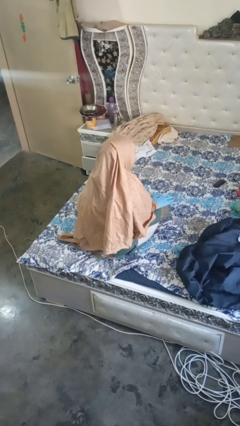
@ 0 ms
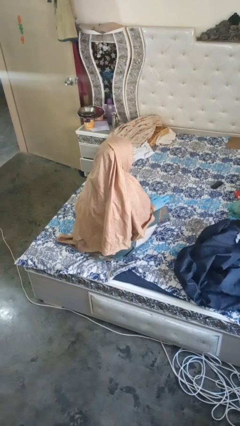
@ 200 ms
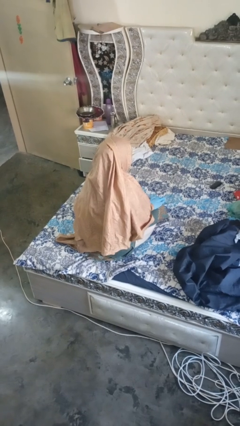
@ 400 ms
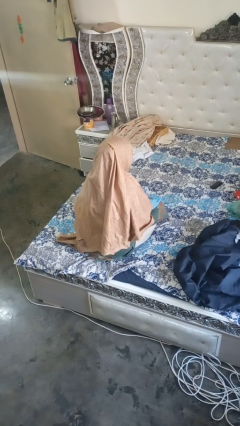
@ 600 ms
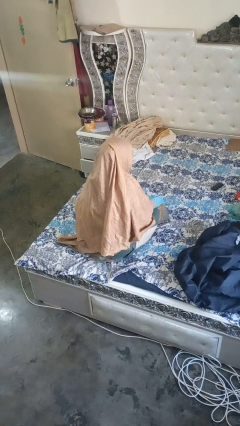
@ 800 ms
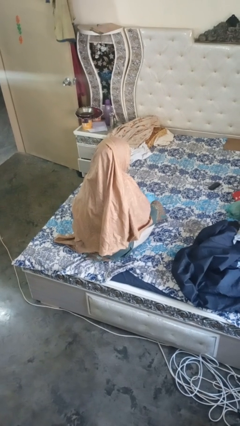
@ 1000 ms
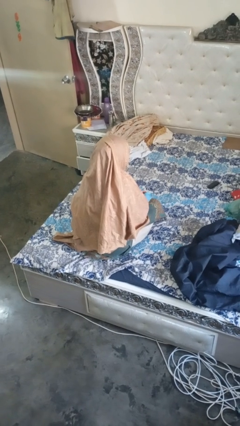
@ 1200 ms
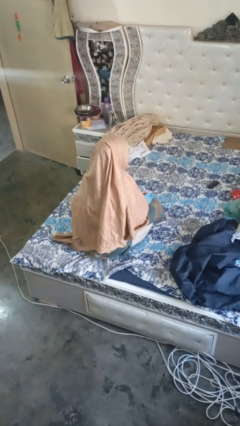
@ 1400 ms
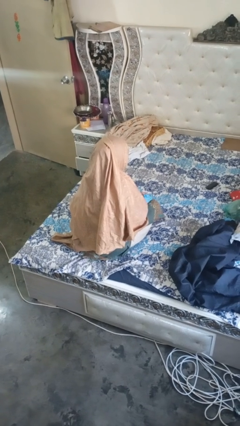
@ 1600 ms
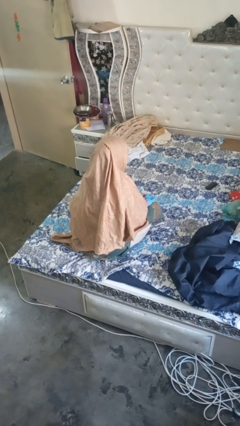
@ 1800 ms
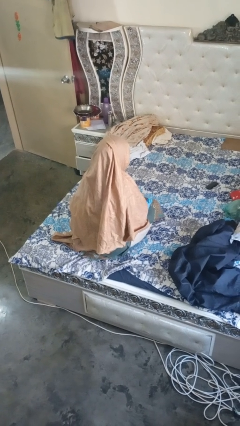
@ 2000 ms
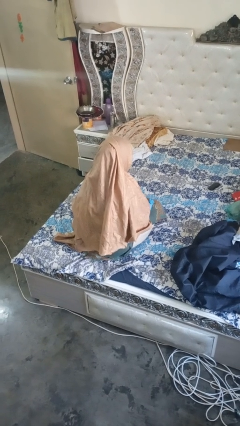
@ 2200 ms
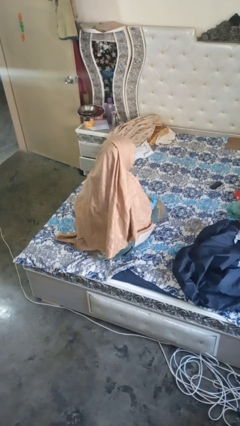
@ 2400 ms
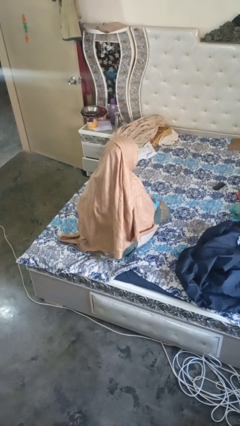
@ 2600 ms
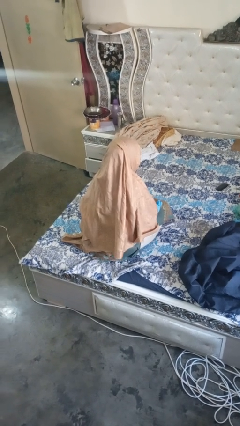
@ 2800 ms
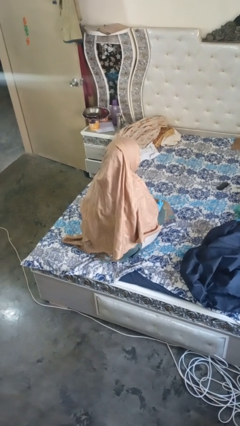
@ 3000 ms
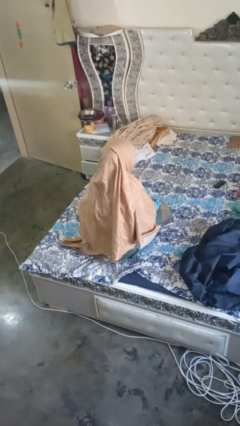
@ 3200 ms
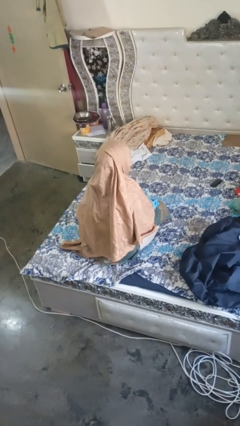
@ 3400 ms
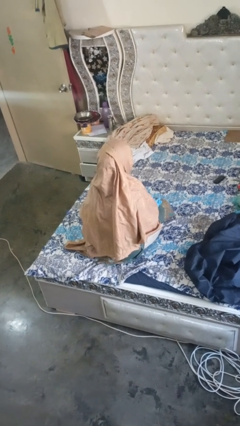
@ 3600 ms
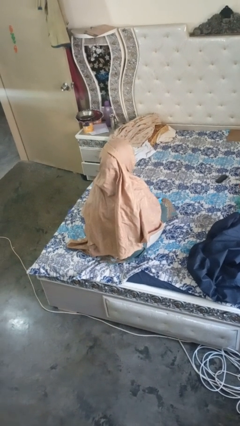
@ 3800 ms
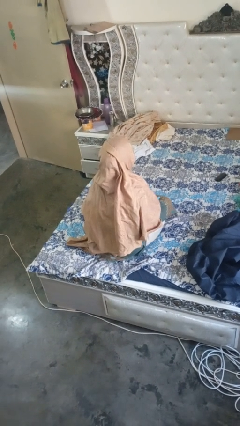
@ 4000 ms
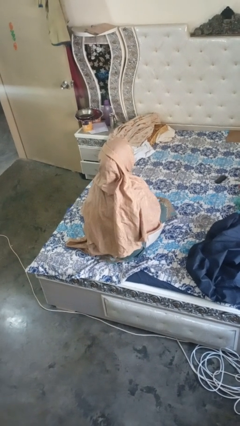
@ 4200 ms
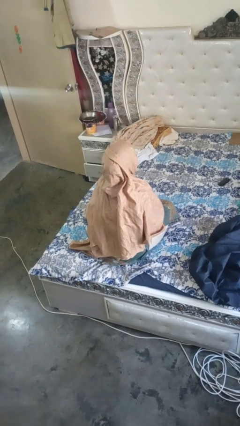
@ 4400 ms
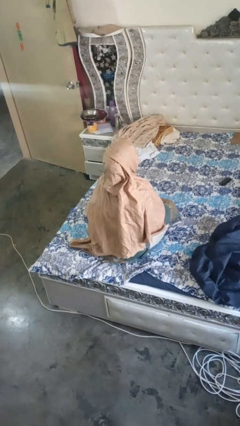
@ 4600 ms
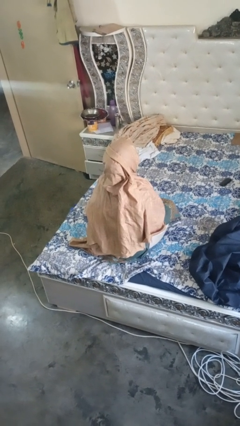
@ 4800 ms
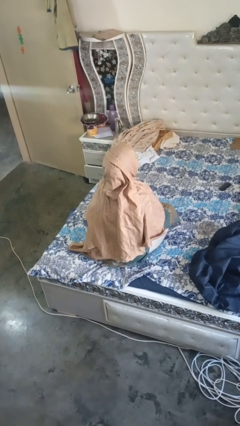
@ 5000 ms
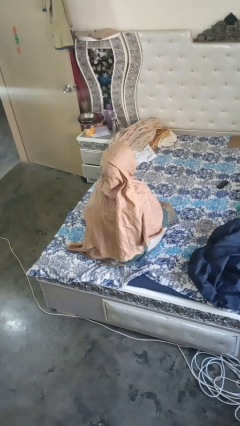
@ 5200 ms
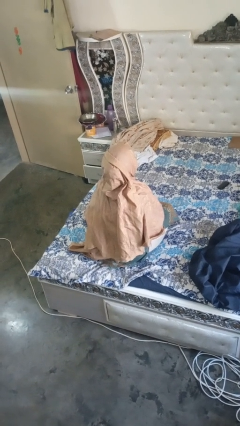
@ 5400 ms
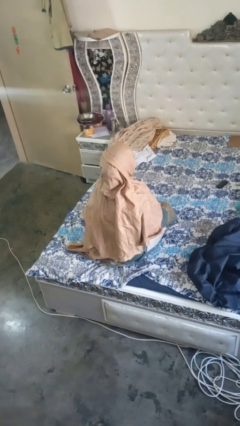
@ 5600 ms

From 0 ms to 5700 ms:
person takes off gloves

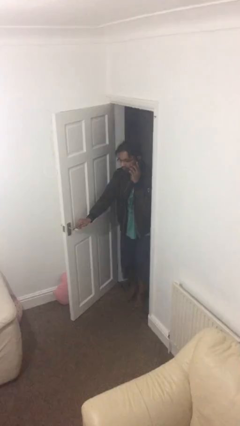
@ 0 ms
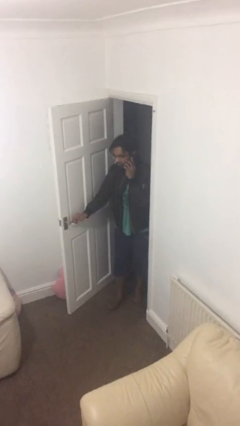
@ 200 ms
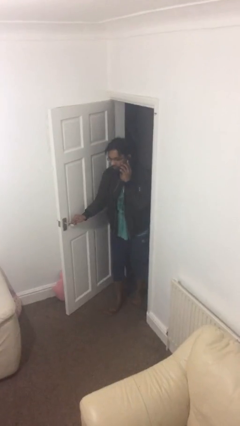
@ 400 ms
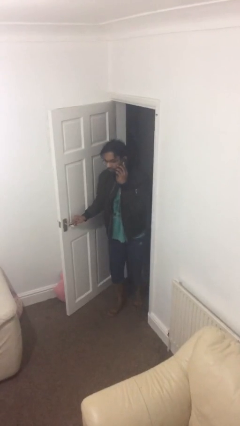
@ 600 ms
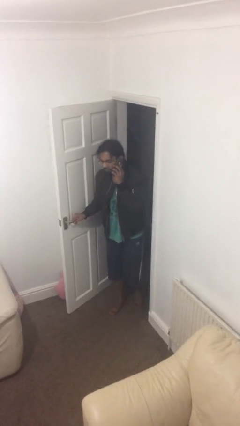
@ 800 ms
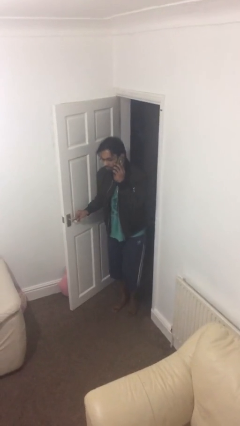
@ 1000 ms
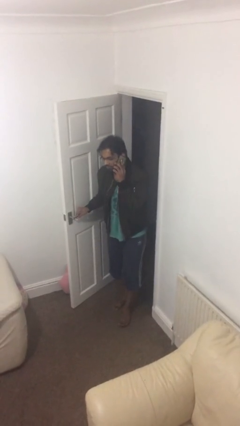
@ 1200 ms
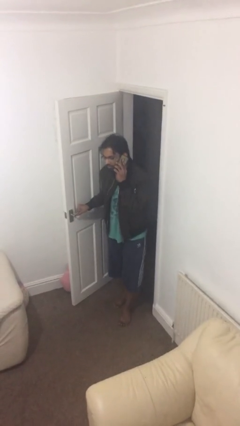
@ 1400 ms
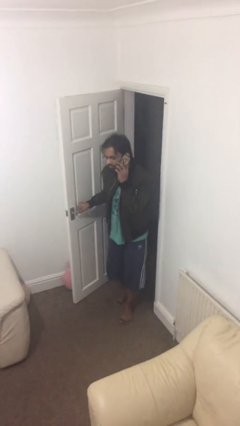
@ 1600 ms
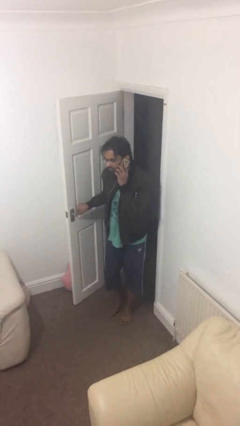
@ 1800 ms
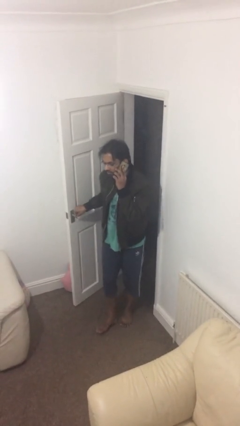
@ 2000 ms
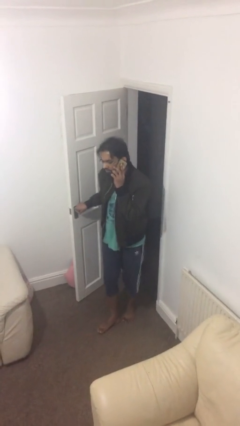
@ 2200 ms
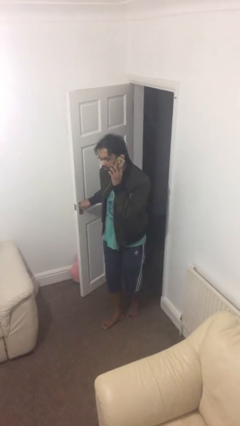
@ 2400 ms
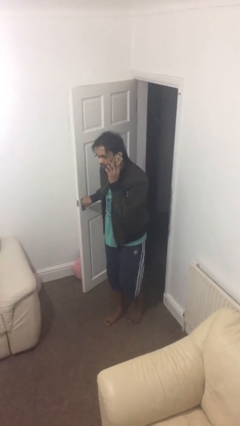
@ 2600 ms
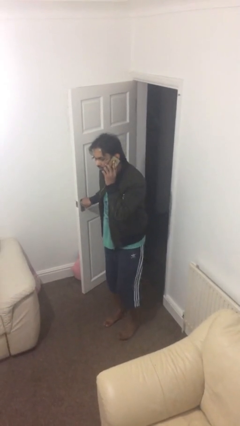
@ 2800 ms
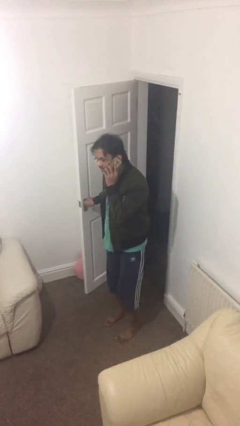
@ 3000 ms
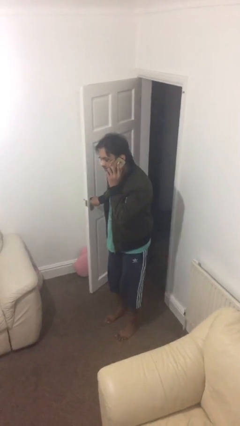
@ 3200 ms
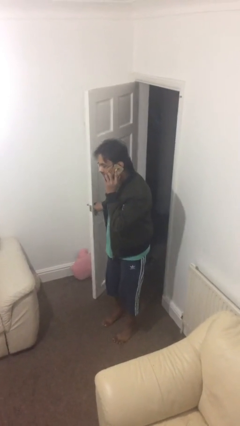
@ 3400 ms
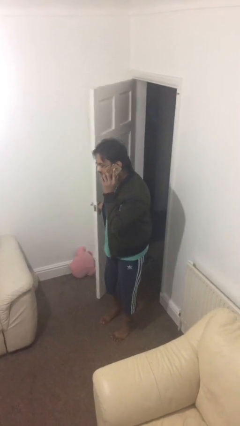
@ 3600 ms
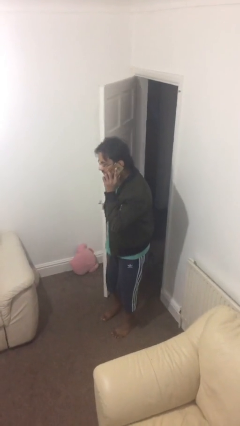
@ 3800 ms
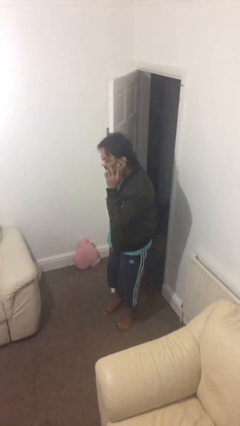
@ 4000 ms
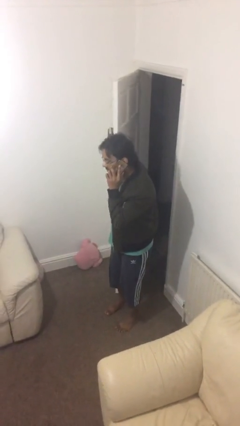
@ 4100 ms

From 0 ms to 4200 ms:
person enters scene through structure

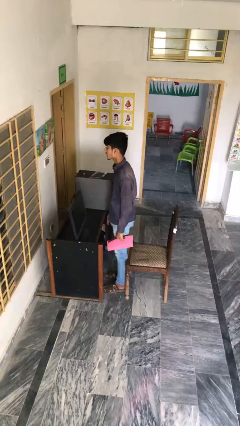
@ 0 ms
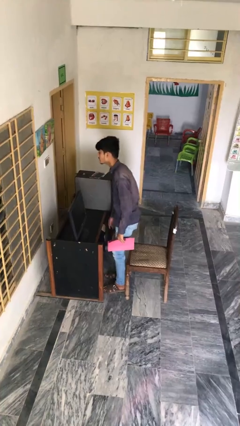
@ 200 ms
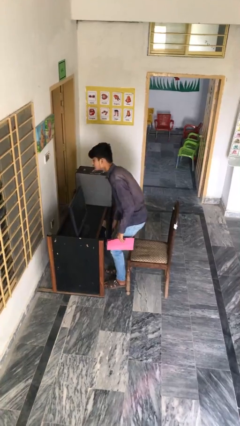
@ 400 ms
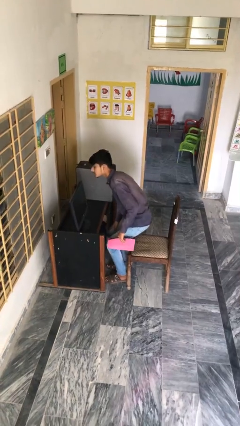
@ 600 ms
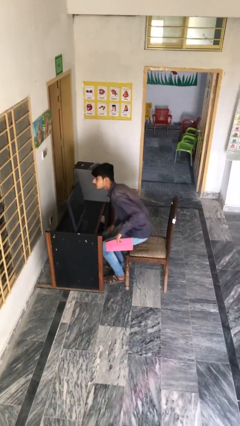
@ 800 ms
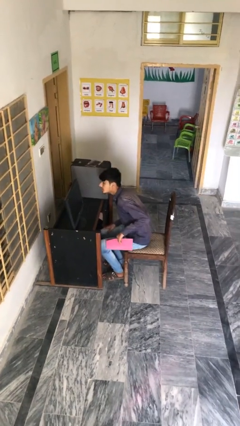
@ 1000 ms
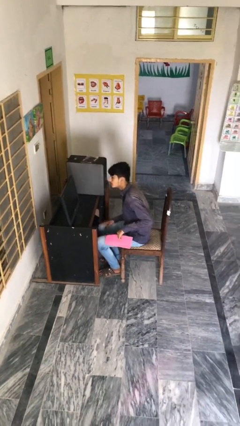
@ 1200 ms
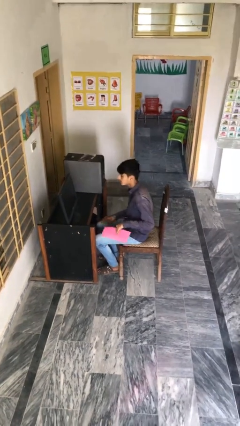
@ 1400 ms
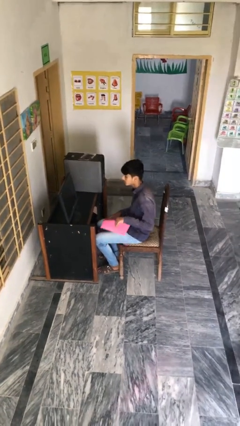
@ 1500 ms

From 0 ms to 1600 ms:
person sits down

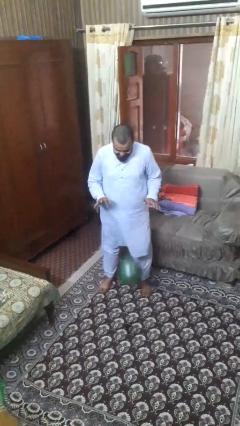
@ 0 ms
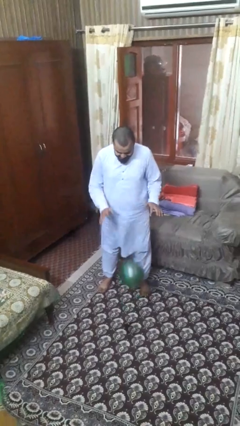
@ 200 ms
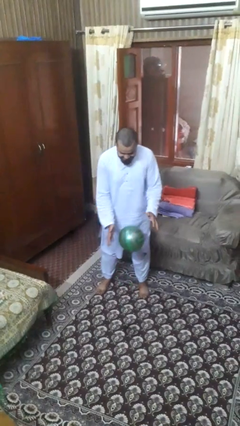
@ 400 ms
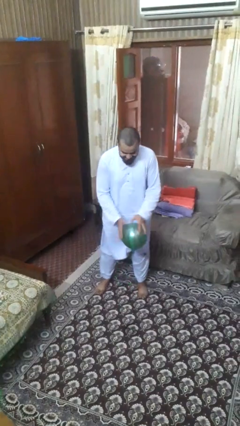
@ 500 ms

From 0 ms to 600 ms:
person bounces ball on floor

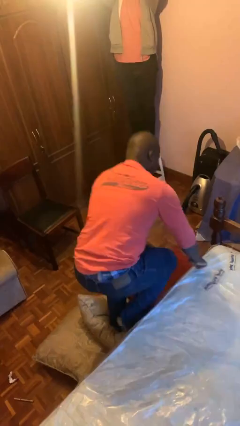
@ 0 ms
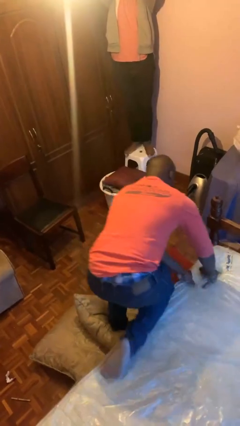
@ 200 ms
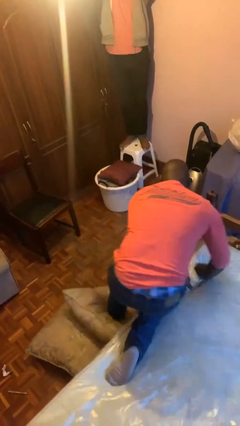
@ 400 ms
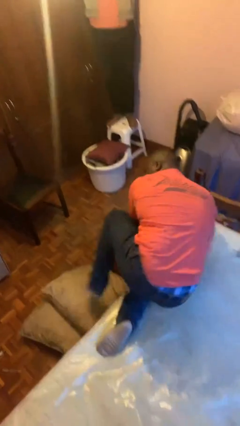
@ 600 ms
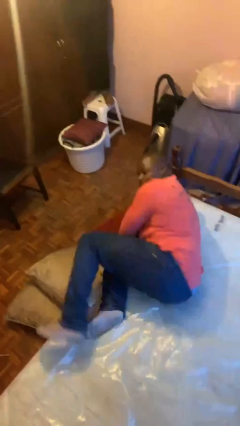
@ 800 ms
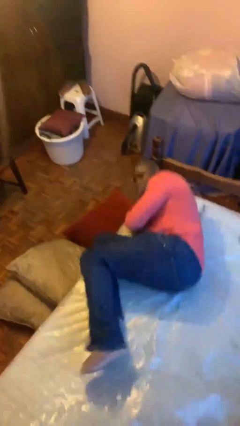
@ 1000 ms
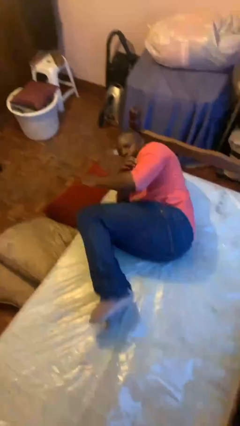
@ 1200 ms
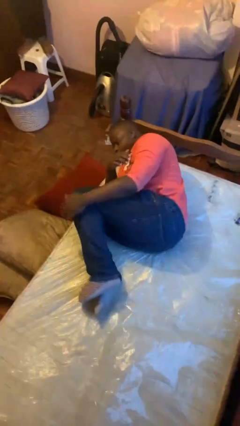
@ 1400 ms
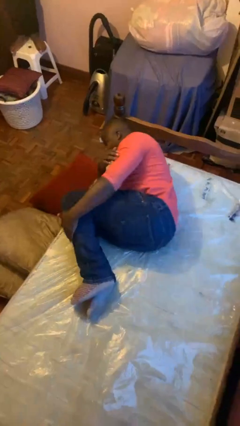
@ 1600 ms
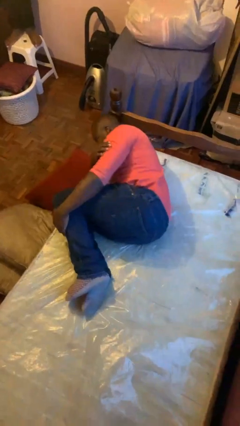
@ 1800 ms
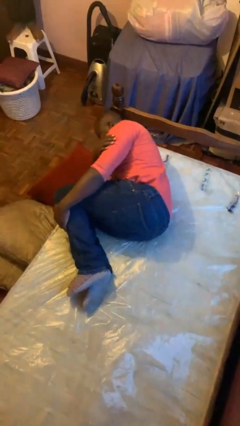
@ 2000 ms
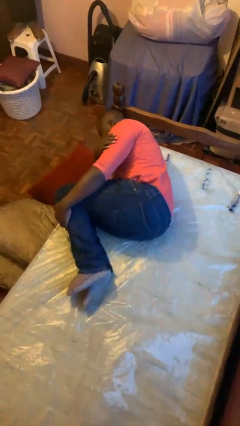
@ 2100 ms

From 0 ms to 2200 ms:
person lies down on bed

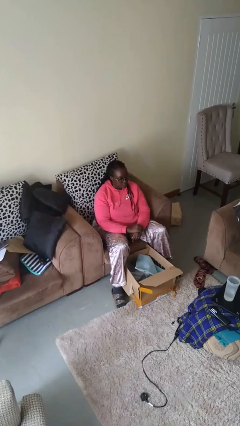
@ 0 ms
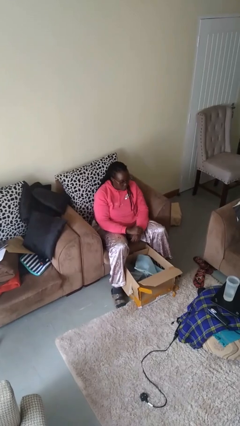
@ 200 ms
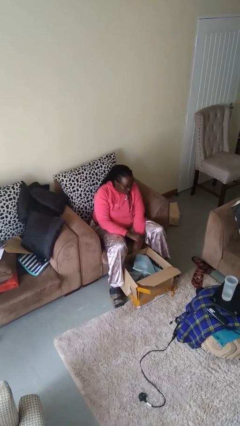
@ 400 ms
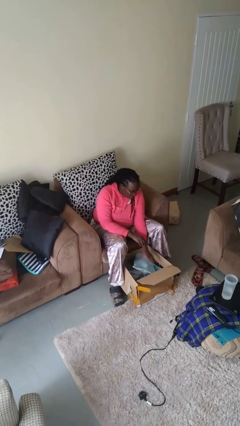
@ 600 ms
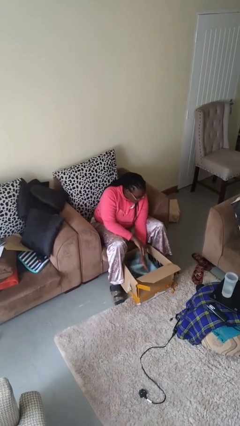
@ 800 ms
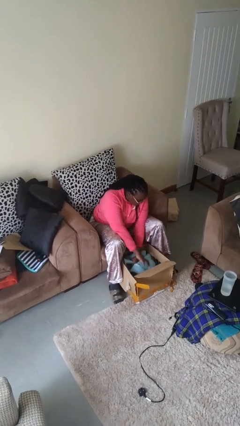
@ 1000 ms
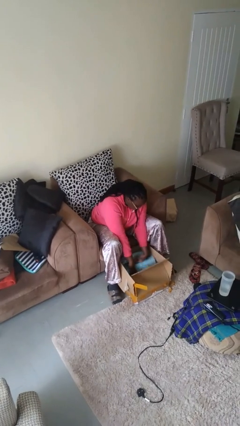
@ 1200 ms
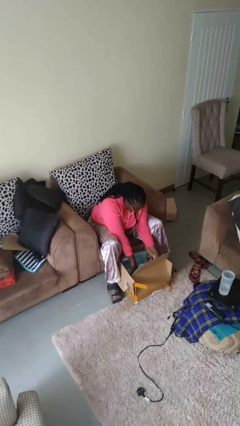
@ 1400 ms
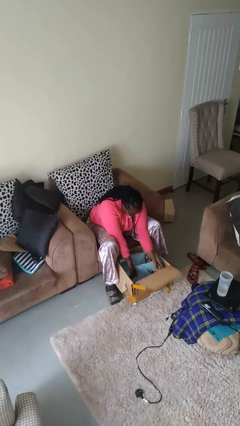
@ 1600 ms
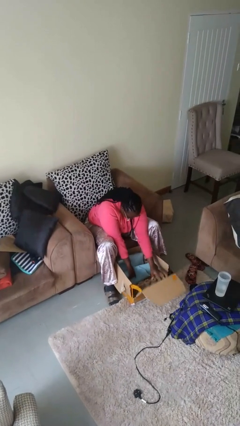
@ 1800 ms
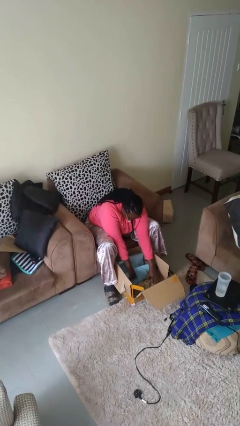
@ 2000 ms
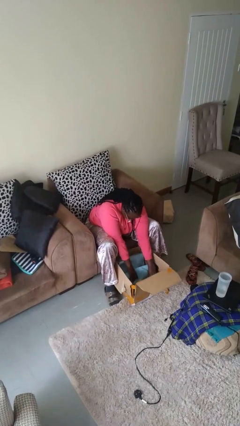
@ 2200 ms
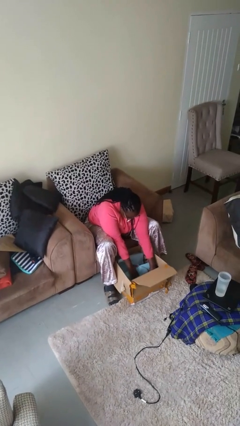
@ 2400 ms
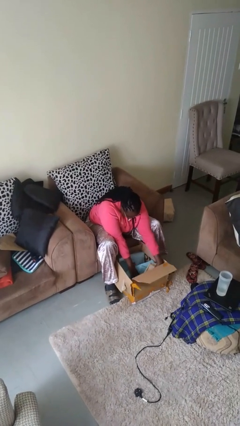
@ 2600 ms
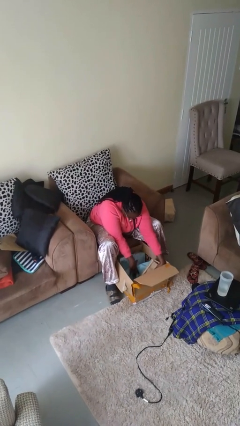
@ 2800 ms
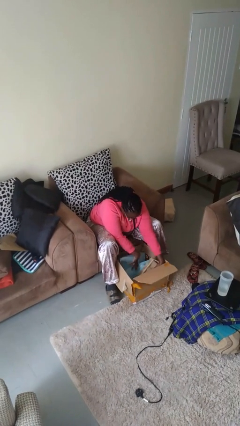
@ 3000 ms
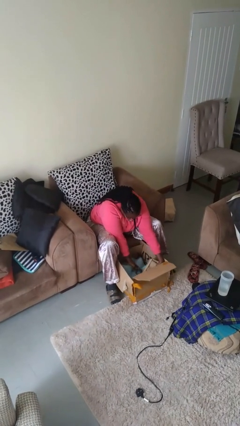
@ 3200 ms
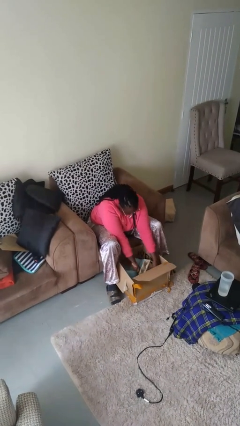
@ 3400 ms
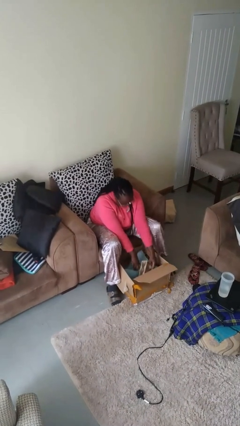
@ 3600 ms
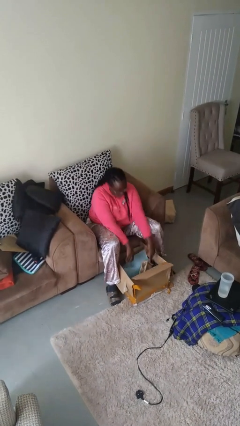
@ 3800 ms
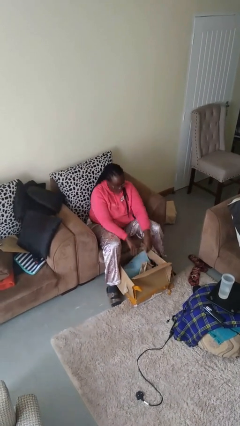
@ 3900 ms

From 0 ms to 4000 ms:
person searches in box
